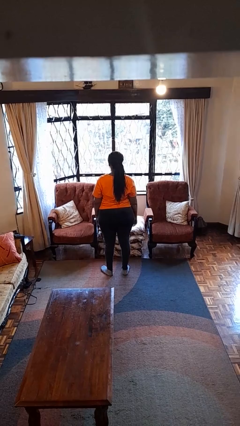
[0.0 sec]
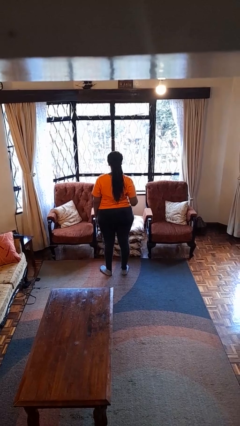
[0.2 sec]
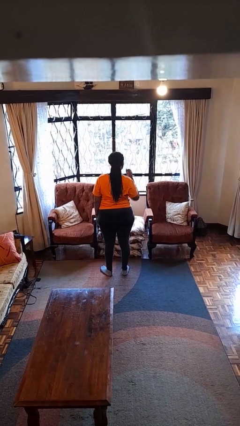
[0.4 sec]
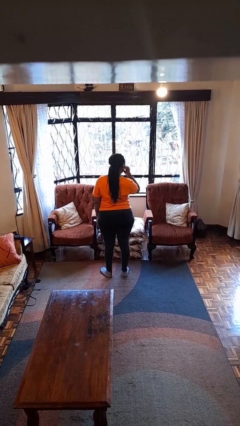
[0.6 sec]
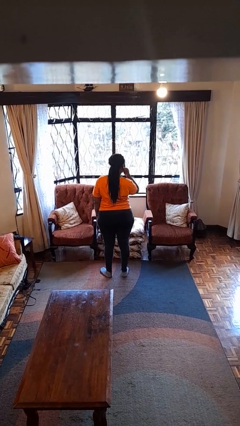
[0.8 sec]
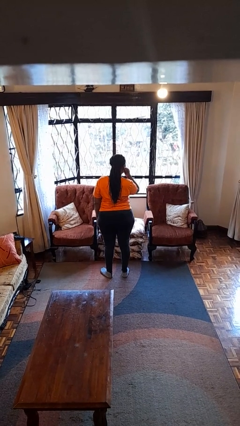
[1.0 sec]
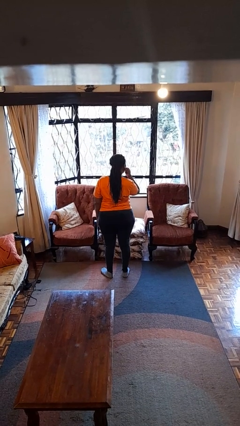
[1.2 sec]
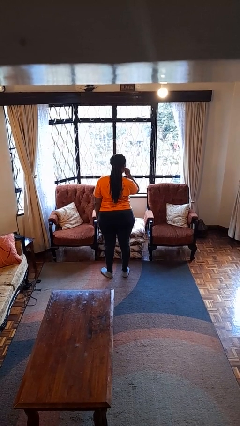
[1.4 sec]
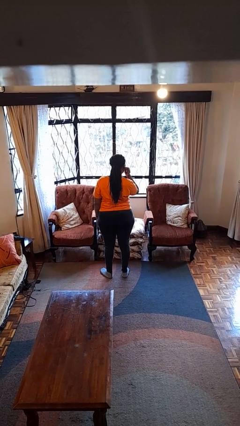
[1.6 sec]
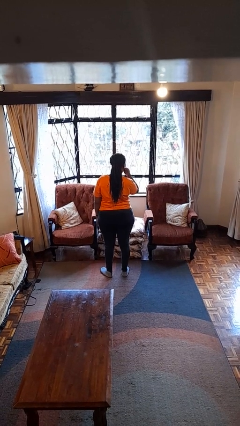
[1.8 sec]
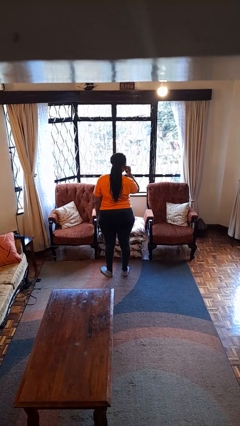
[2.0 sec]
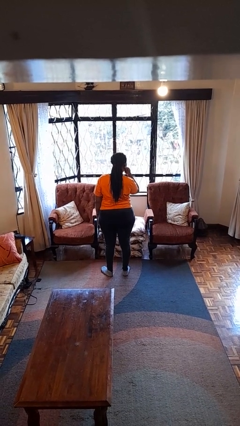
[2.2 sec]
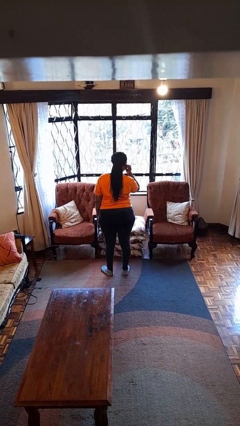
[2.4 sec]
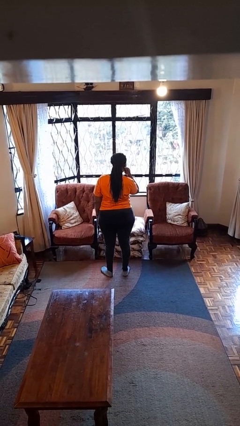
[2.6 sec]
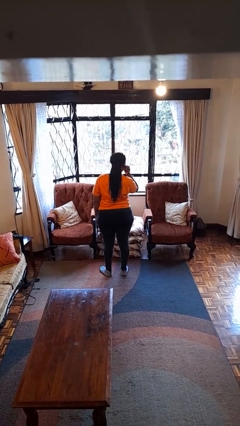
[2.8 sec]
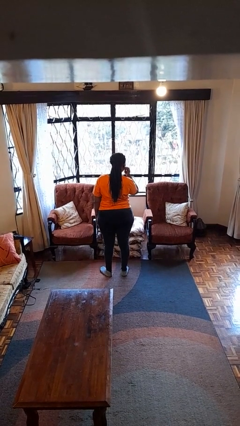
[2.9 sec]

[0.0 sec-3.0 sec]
person touches earlobe

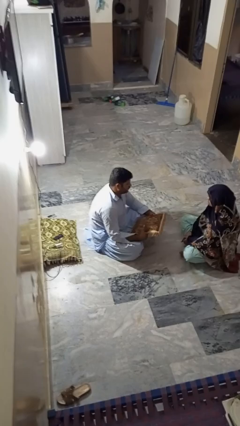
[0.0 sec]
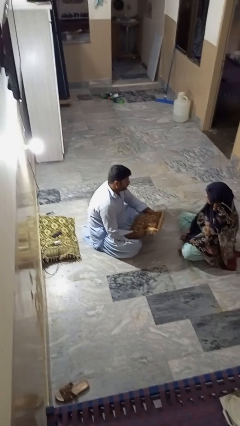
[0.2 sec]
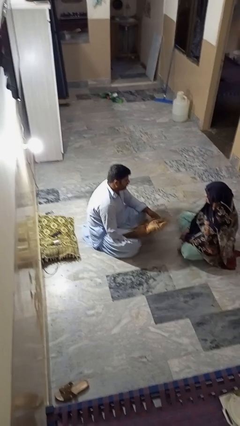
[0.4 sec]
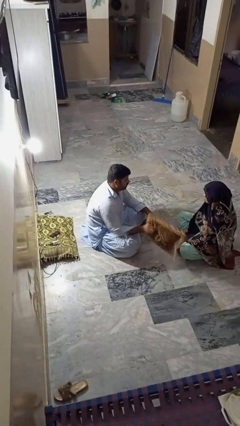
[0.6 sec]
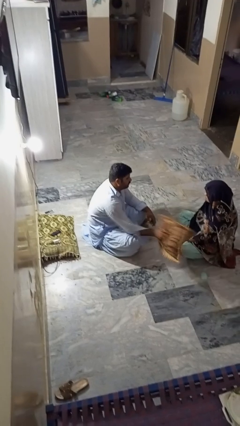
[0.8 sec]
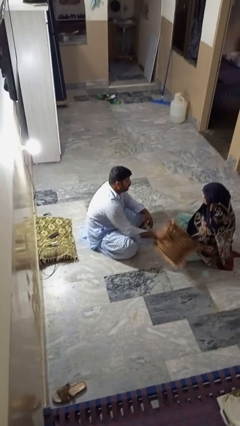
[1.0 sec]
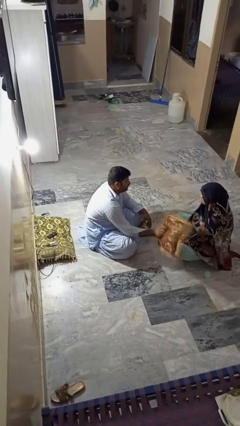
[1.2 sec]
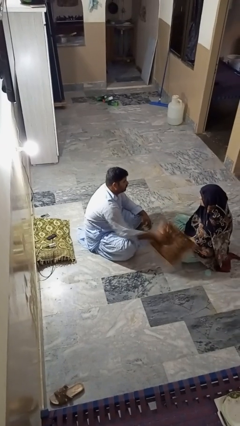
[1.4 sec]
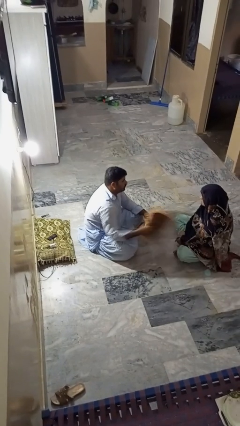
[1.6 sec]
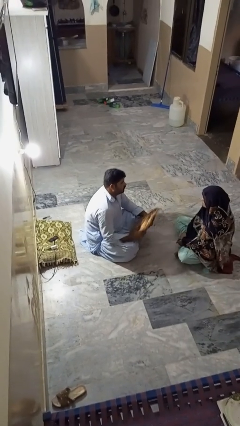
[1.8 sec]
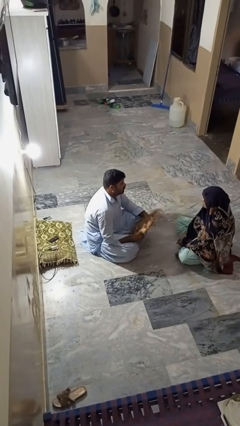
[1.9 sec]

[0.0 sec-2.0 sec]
person hits person with pillow

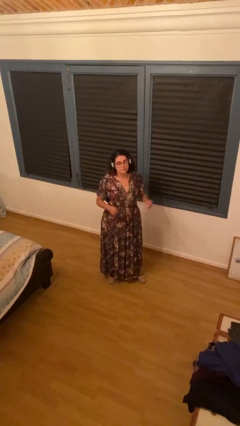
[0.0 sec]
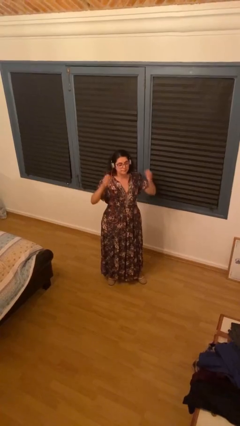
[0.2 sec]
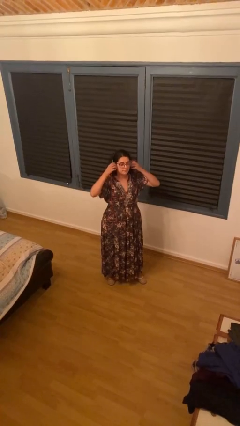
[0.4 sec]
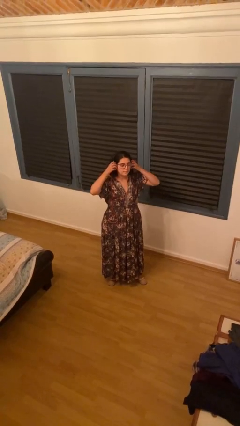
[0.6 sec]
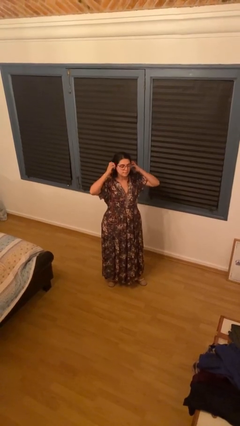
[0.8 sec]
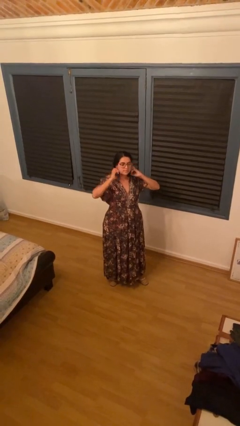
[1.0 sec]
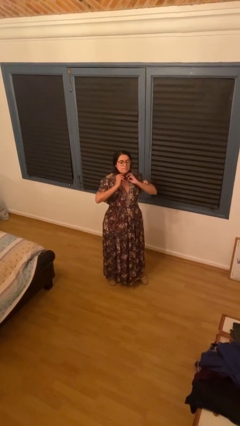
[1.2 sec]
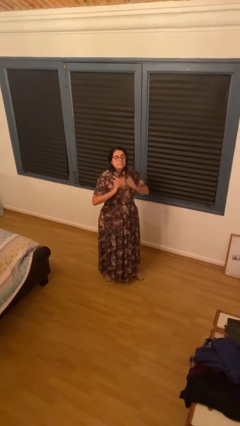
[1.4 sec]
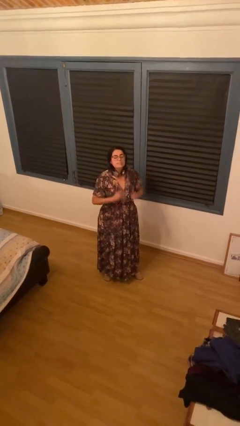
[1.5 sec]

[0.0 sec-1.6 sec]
person takes off headphones

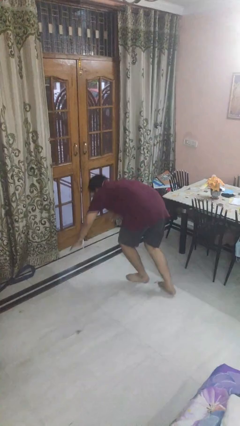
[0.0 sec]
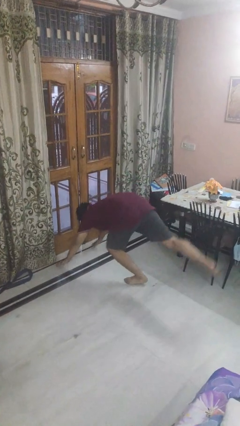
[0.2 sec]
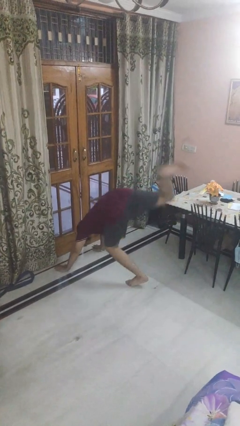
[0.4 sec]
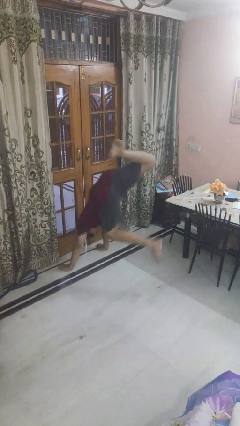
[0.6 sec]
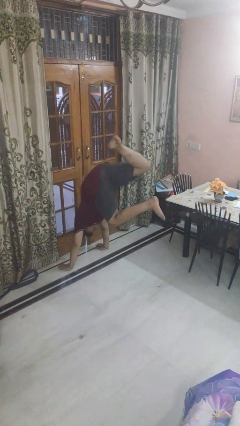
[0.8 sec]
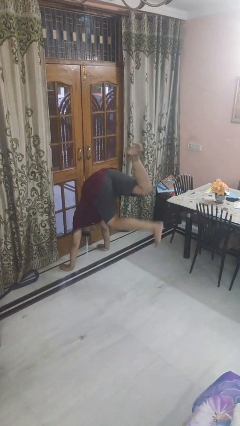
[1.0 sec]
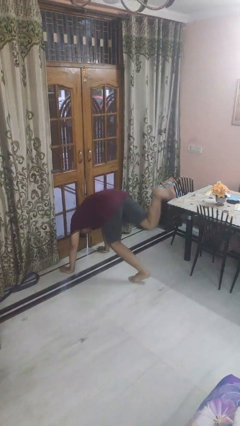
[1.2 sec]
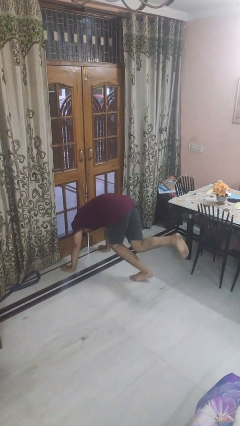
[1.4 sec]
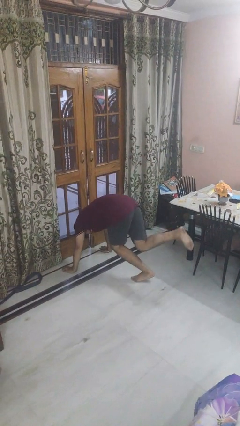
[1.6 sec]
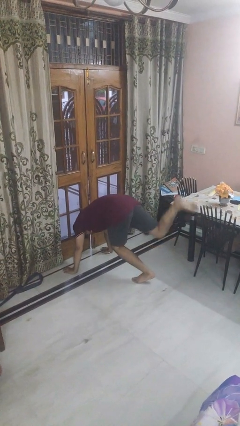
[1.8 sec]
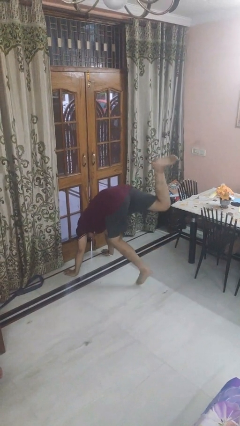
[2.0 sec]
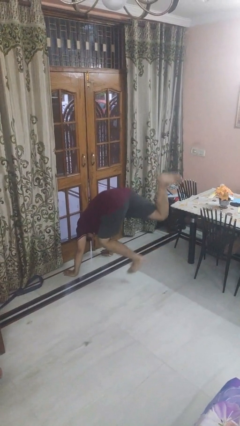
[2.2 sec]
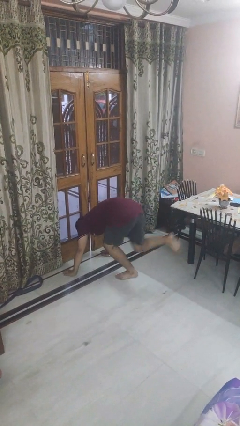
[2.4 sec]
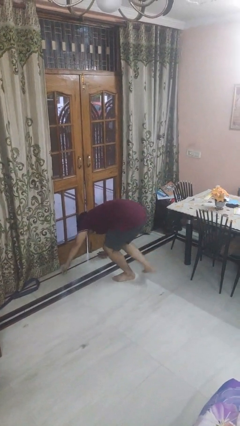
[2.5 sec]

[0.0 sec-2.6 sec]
person handstand

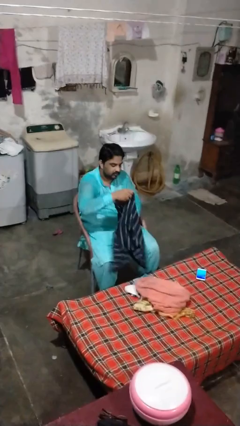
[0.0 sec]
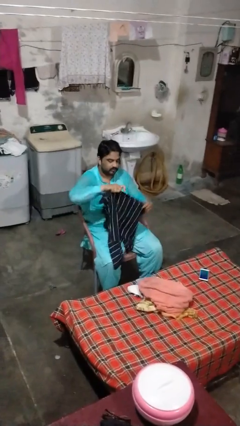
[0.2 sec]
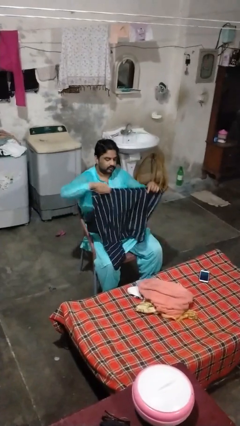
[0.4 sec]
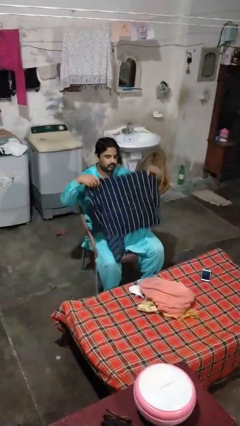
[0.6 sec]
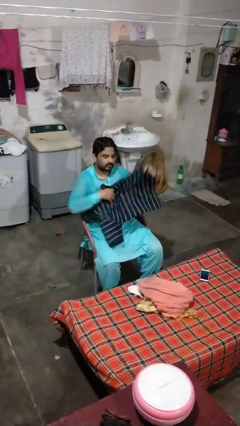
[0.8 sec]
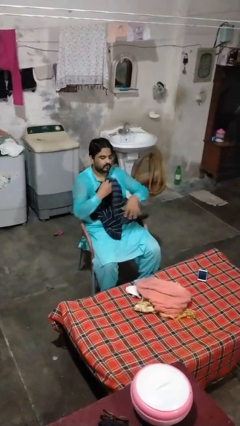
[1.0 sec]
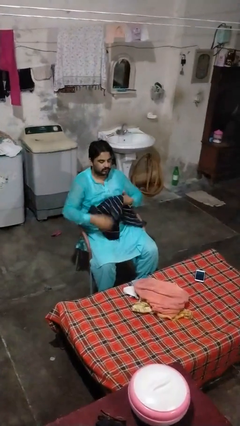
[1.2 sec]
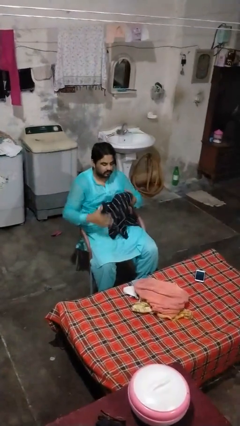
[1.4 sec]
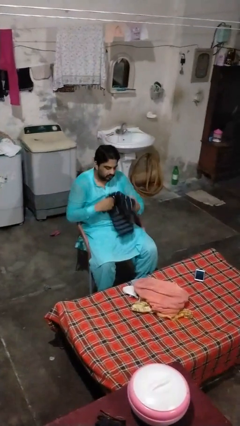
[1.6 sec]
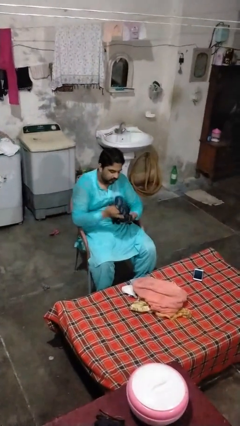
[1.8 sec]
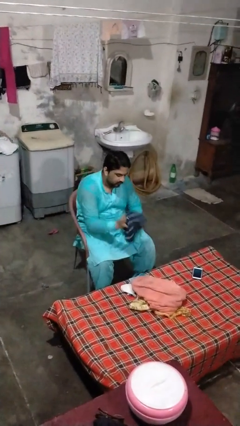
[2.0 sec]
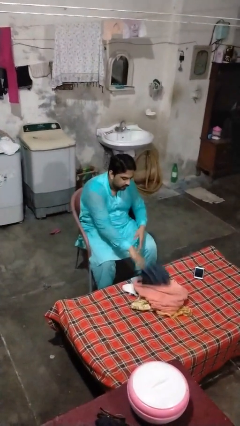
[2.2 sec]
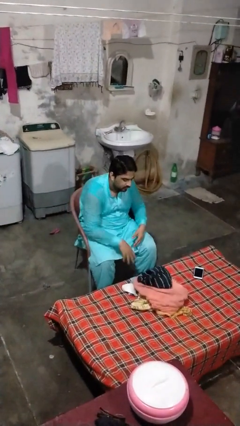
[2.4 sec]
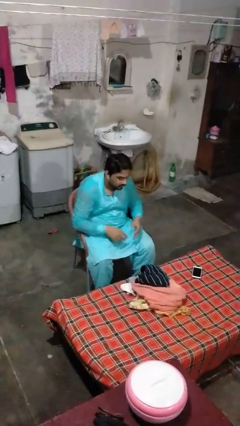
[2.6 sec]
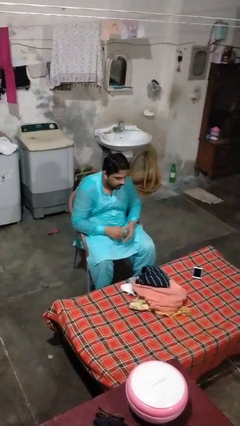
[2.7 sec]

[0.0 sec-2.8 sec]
person folds shirt

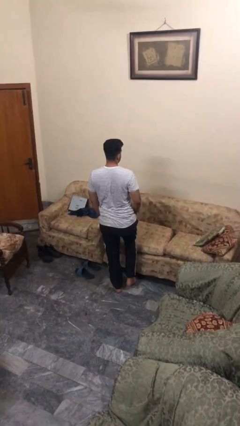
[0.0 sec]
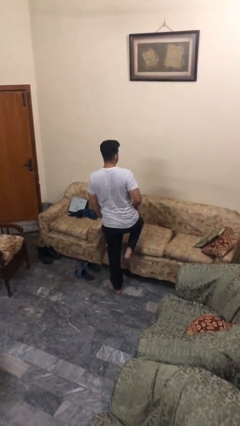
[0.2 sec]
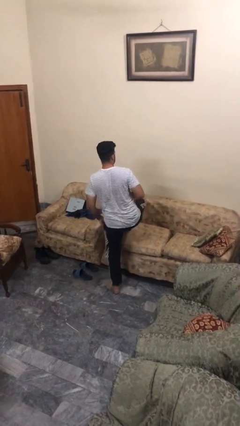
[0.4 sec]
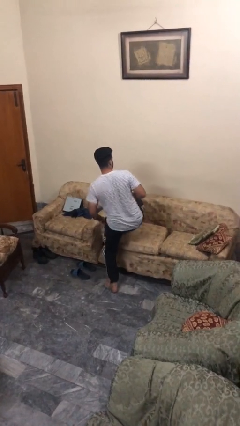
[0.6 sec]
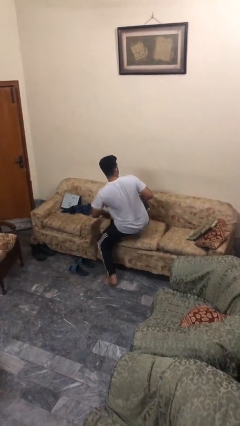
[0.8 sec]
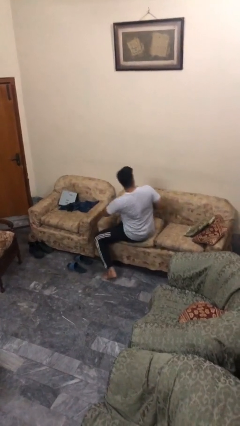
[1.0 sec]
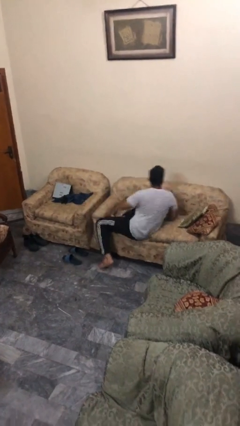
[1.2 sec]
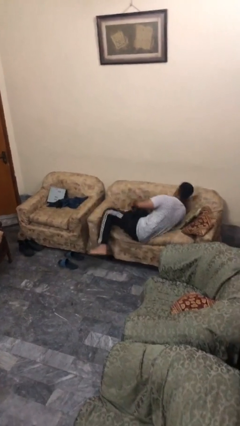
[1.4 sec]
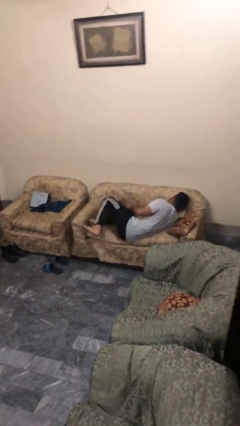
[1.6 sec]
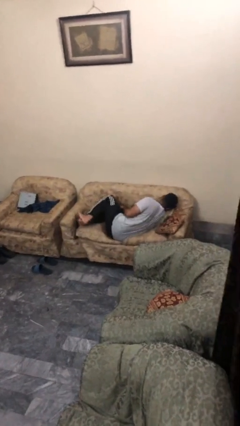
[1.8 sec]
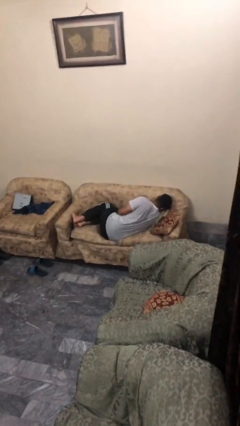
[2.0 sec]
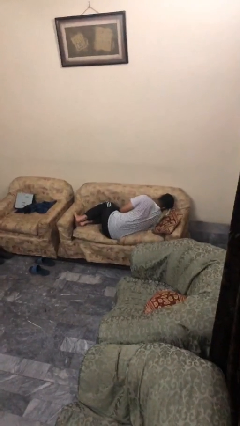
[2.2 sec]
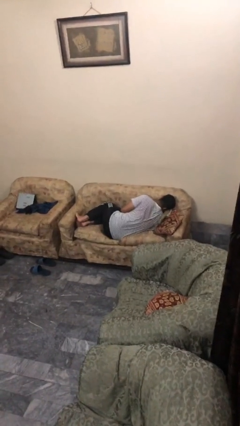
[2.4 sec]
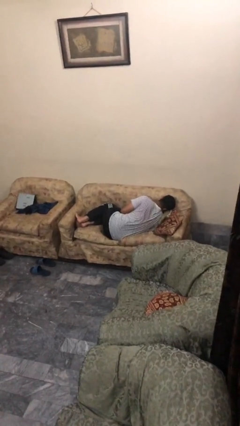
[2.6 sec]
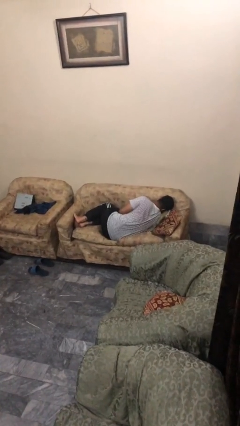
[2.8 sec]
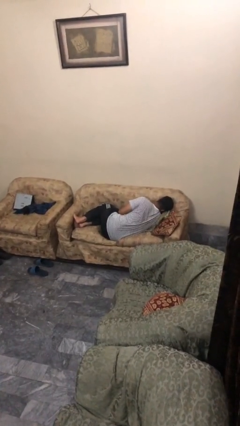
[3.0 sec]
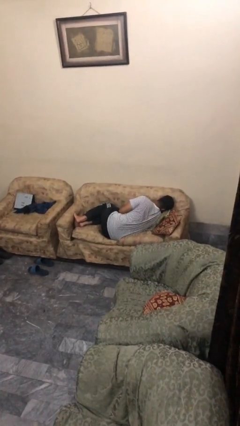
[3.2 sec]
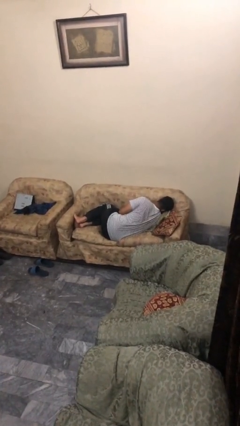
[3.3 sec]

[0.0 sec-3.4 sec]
person lies down on couch

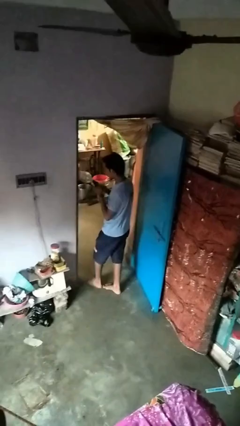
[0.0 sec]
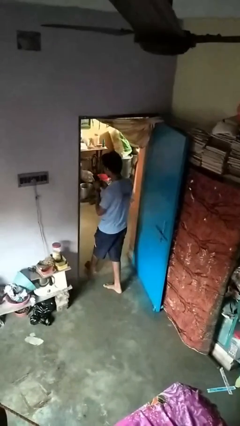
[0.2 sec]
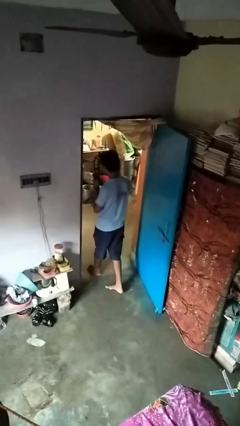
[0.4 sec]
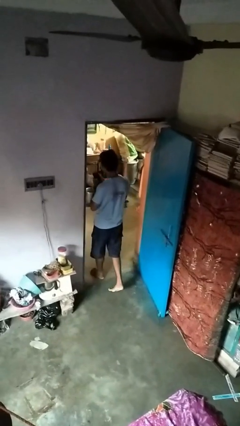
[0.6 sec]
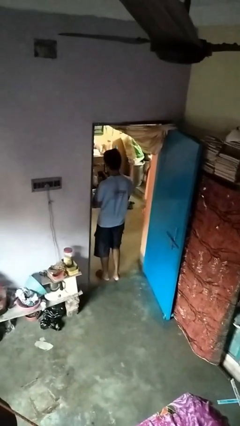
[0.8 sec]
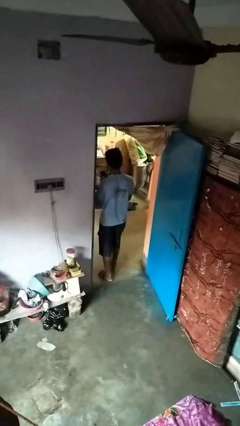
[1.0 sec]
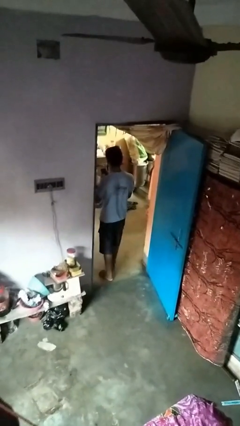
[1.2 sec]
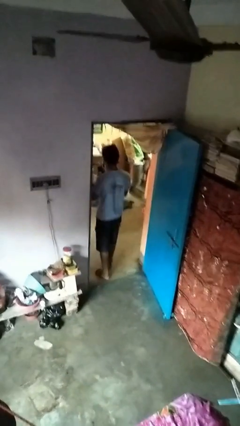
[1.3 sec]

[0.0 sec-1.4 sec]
person exits scene through structure
